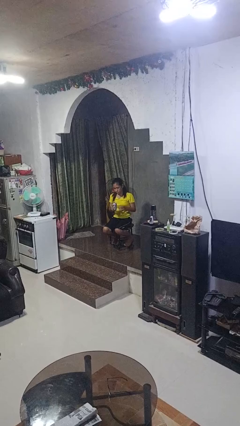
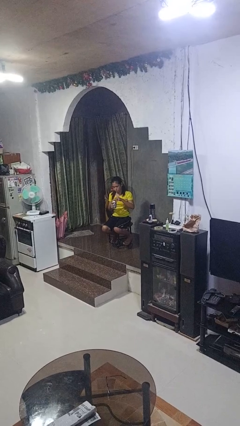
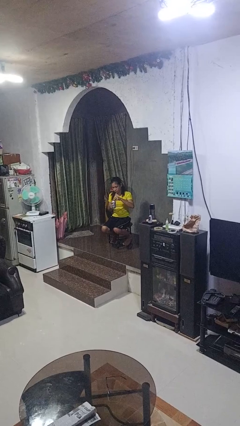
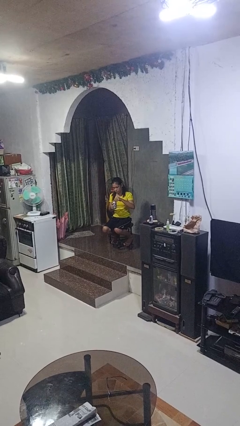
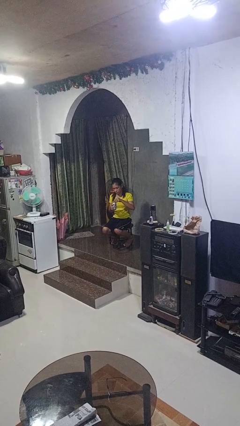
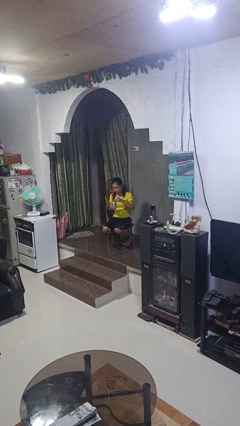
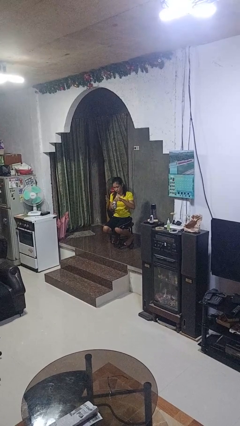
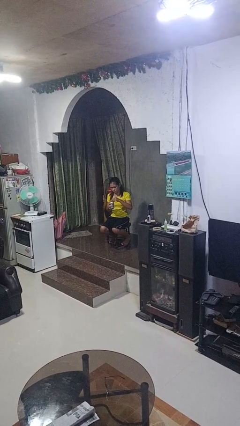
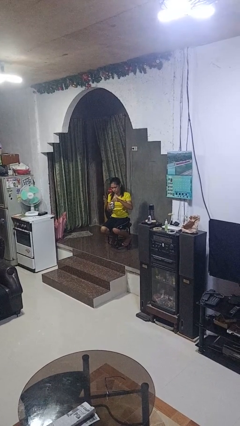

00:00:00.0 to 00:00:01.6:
person opens beverage can

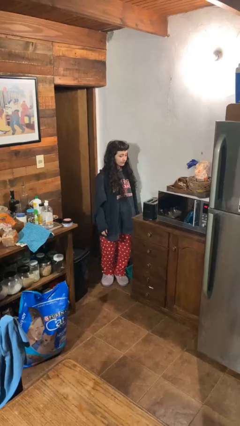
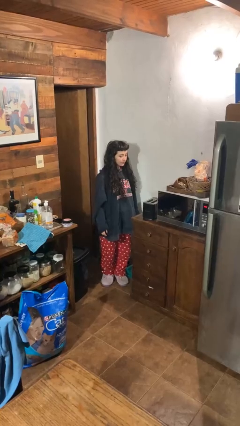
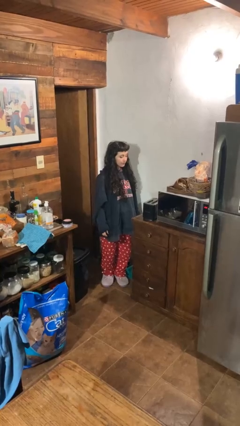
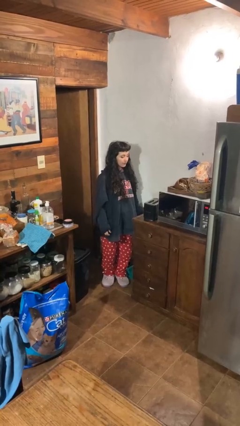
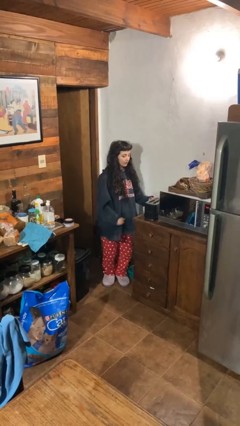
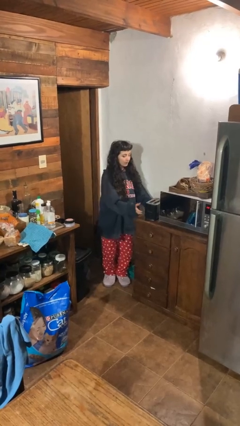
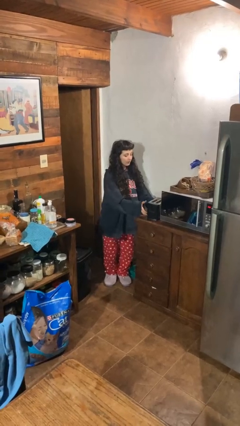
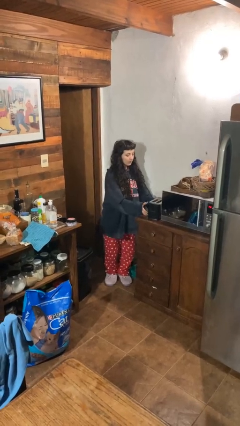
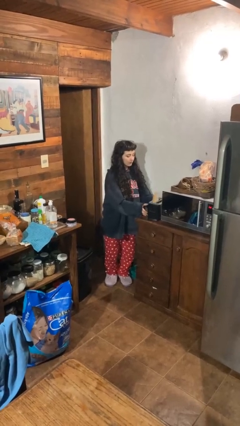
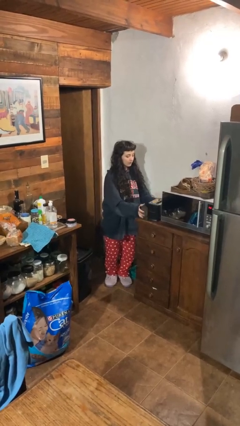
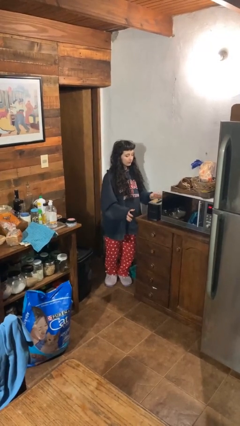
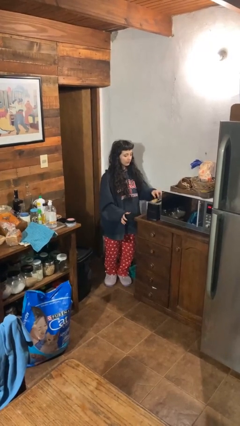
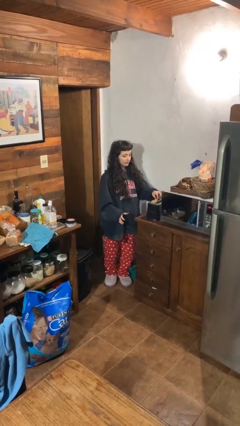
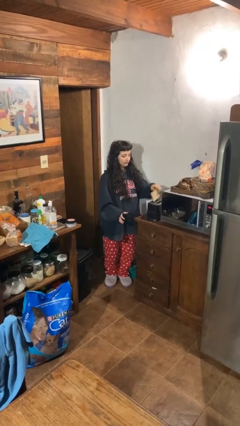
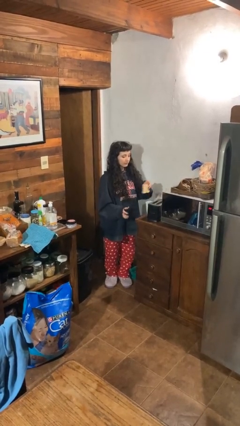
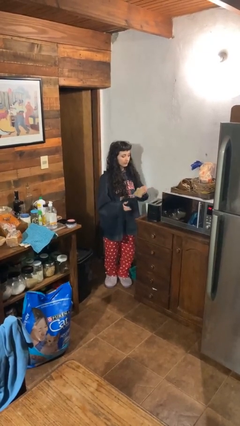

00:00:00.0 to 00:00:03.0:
person takes object from toaster

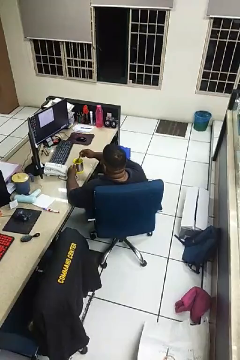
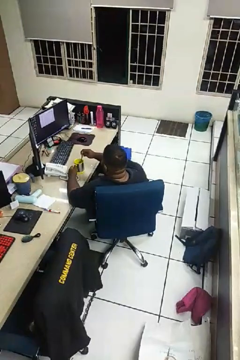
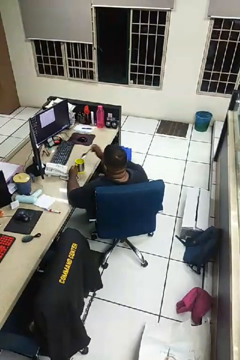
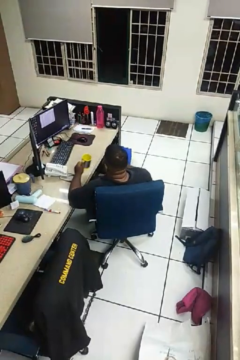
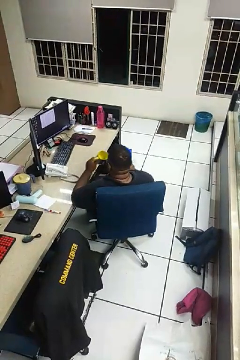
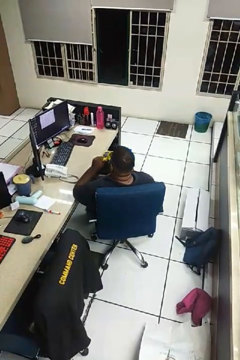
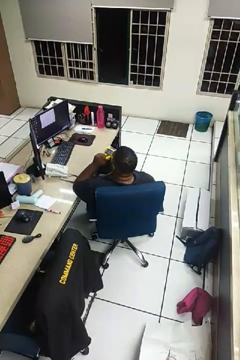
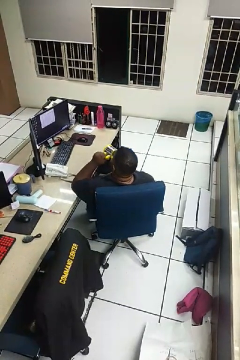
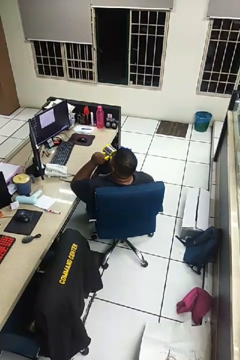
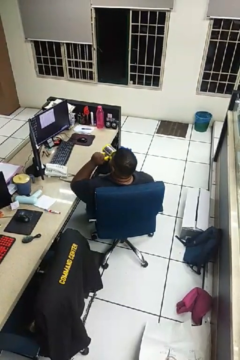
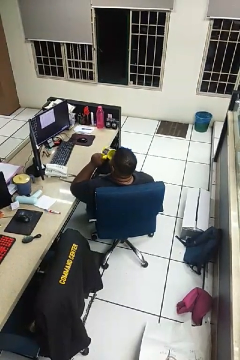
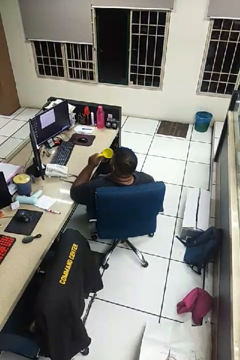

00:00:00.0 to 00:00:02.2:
person drinks from mug

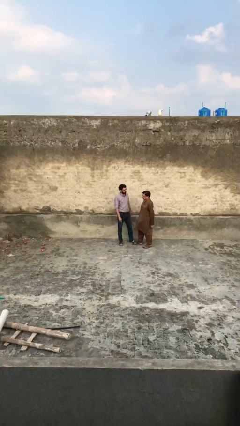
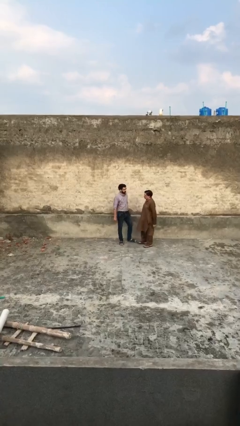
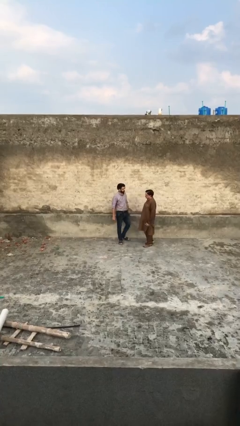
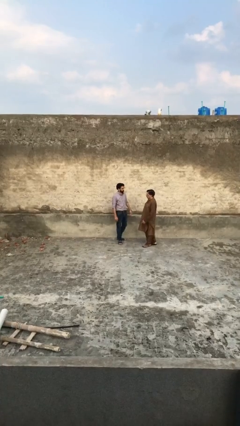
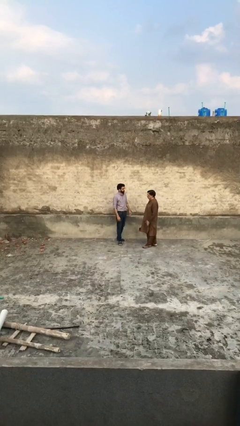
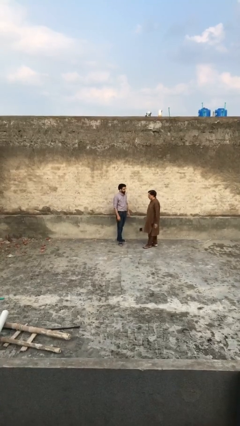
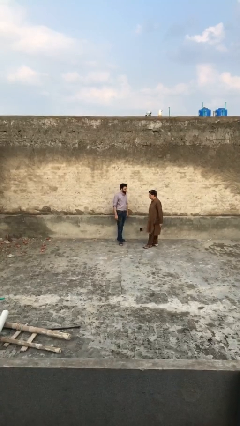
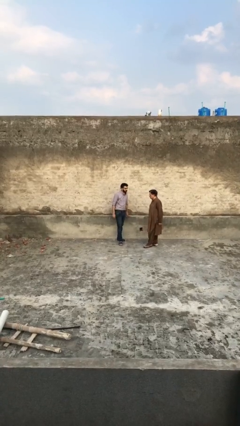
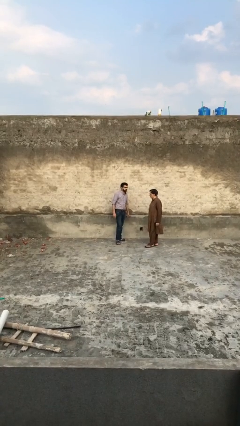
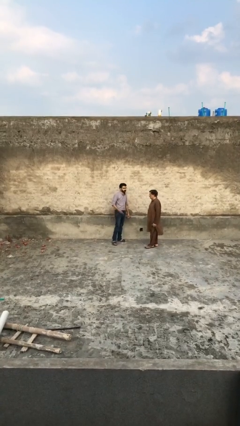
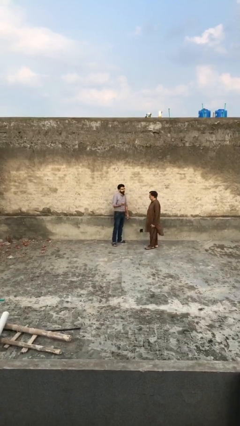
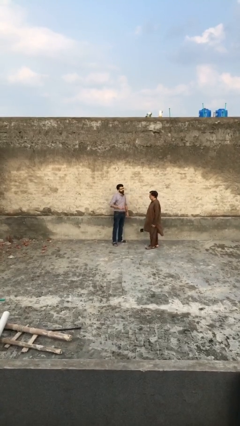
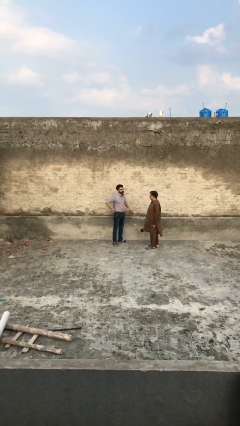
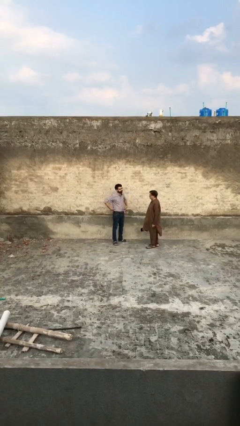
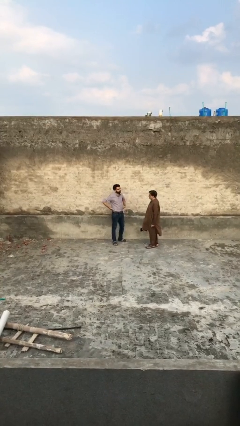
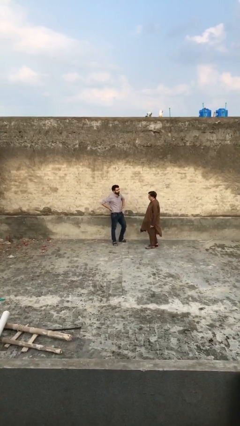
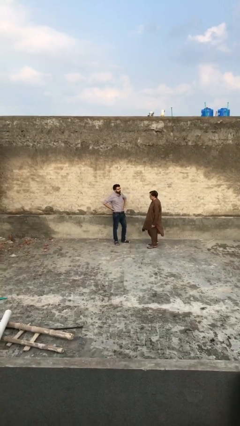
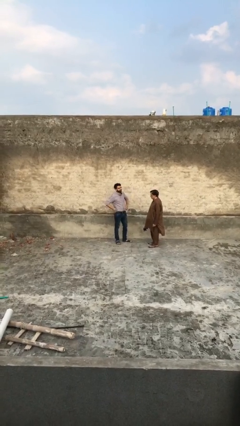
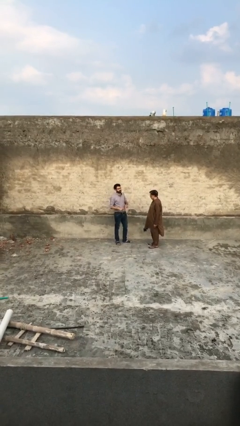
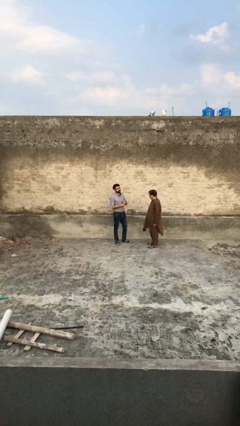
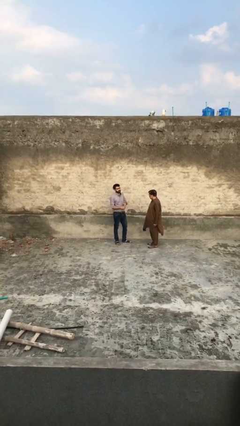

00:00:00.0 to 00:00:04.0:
person talks to person

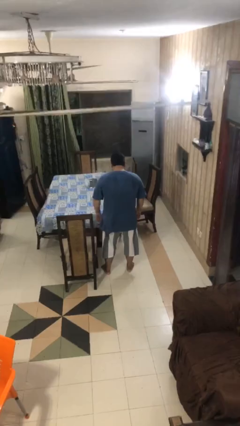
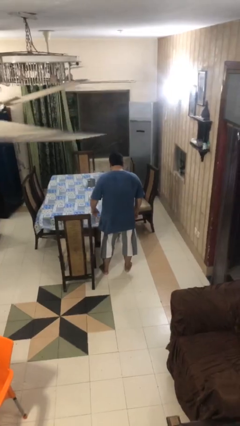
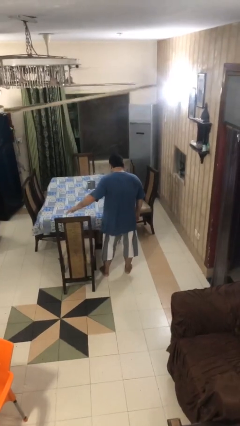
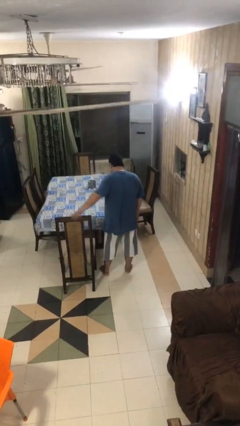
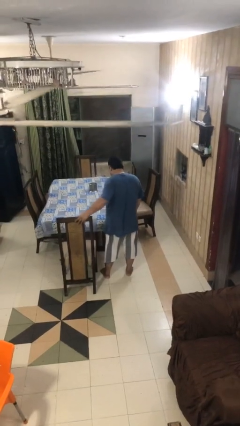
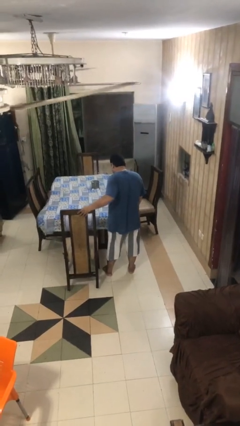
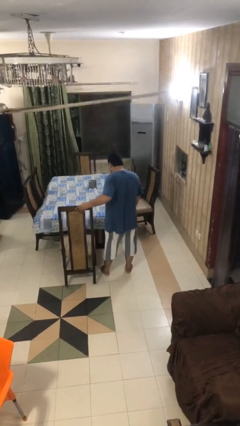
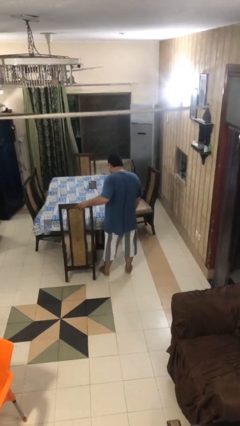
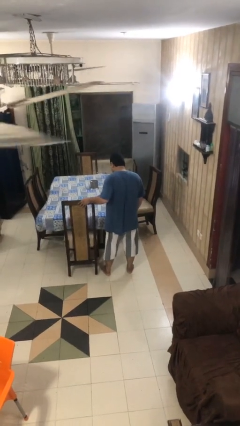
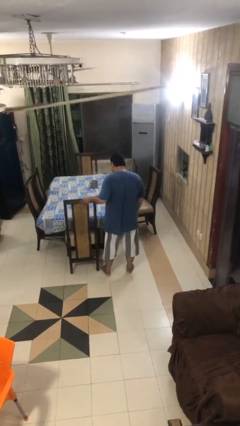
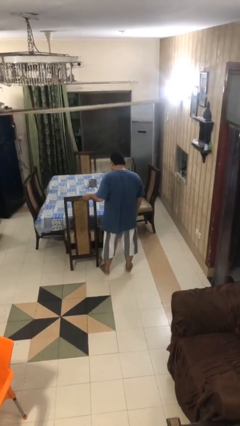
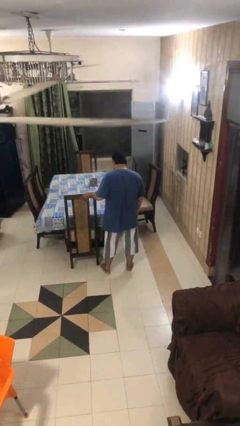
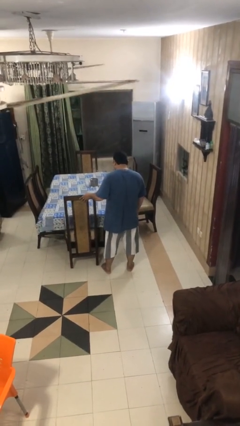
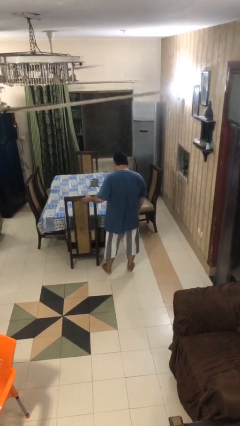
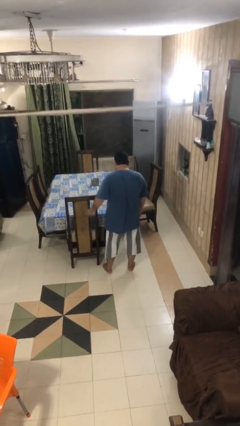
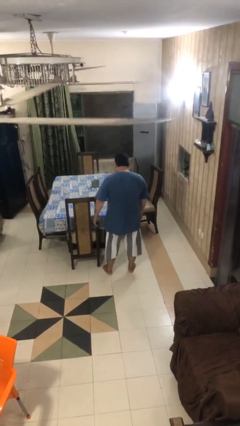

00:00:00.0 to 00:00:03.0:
person pushes in chair

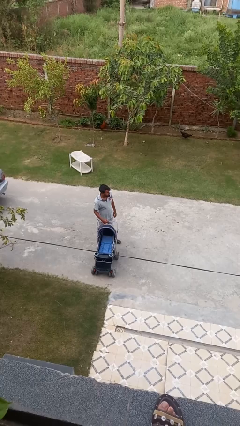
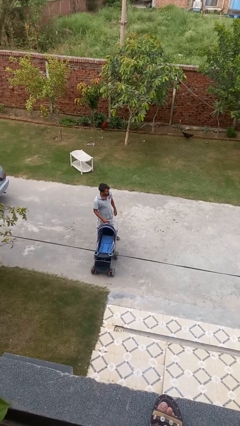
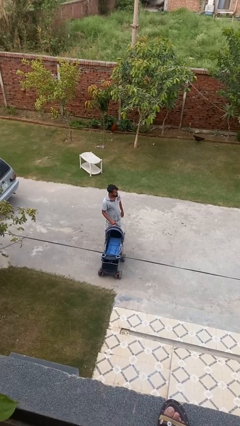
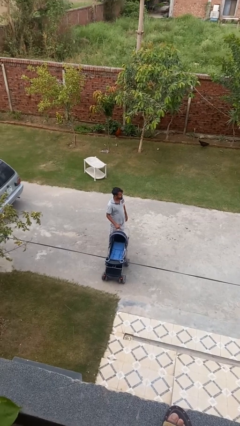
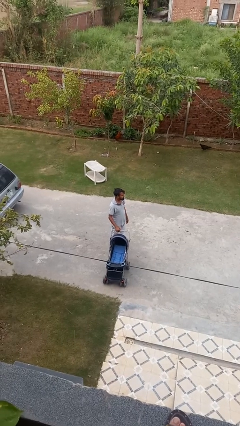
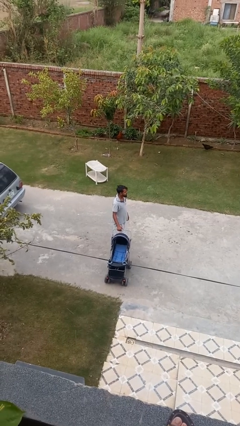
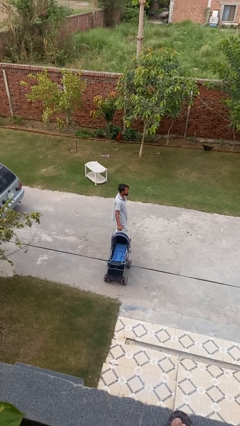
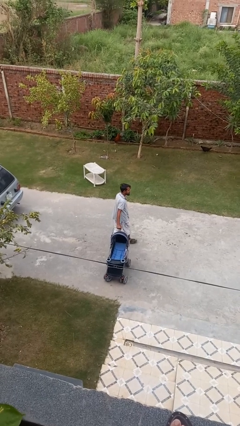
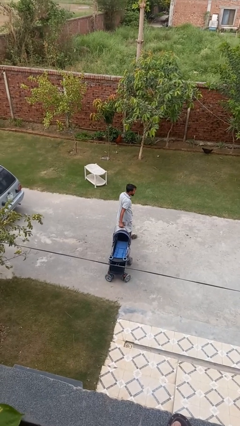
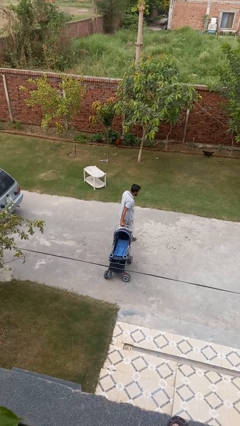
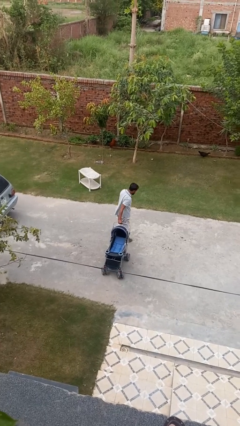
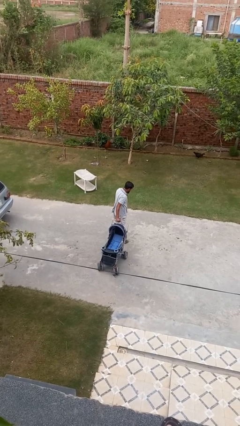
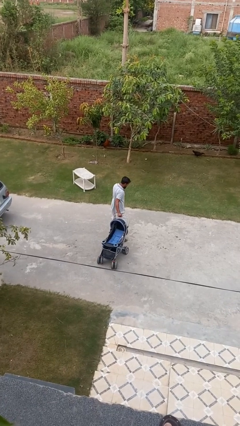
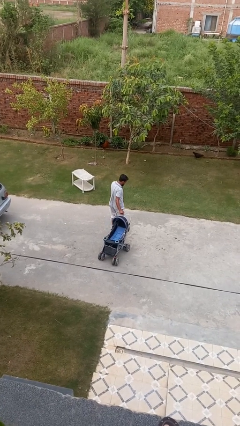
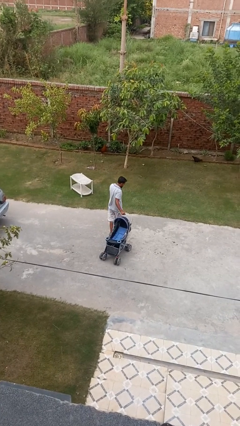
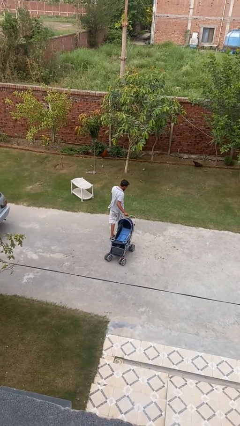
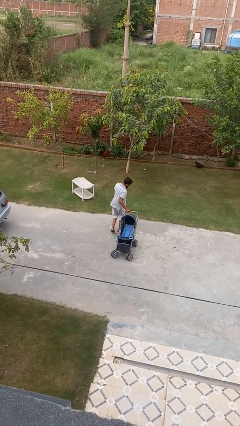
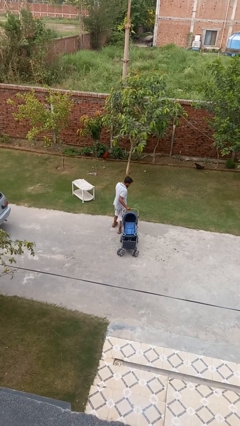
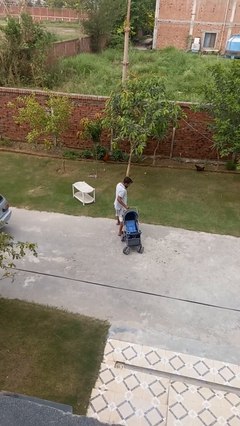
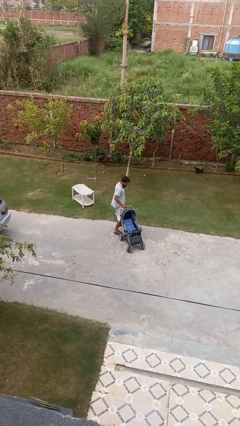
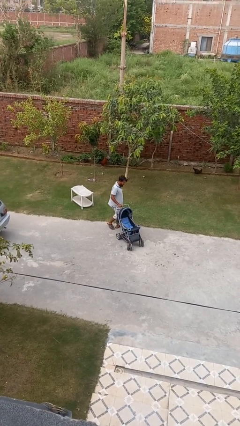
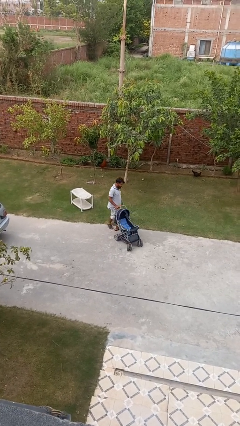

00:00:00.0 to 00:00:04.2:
person pulls wheeled cart
